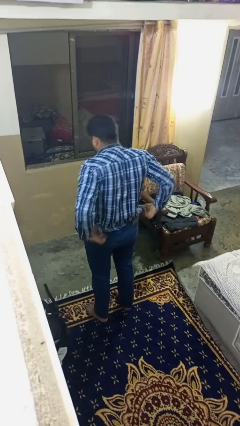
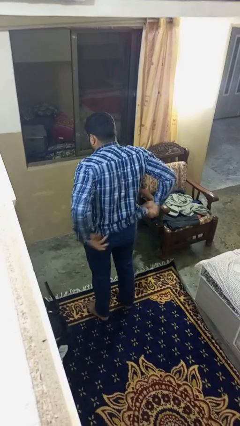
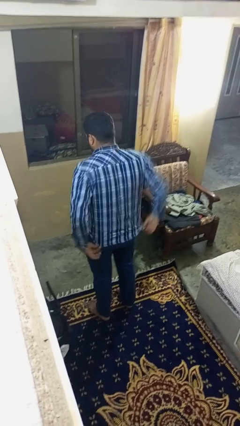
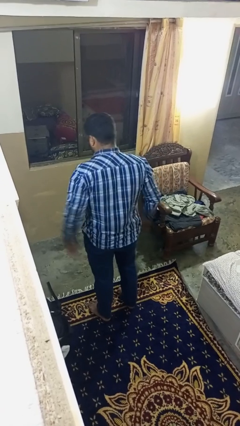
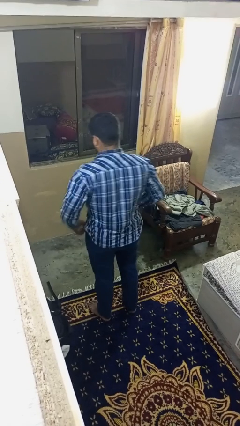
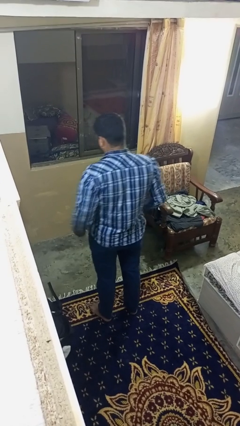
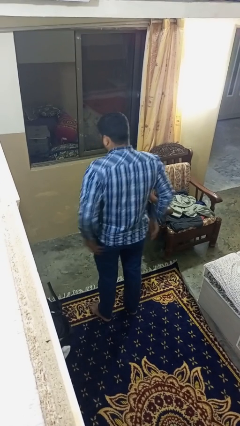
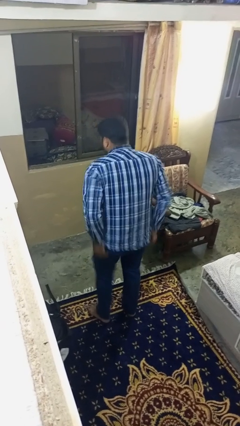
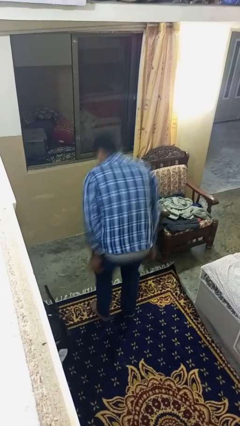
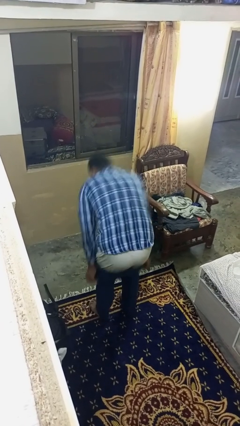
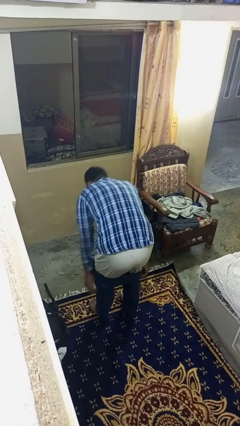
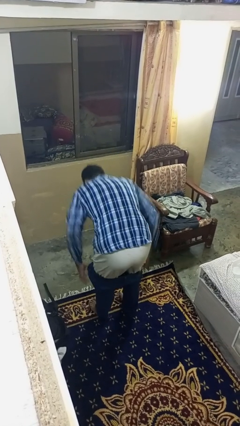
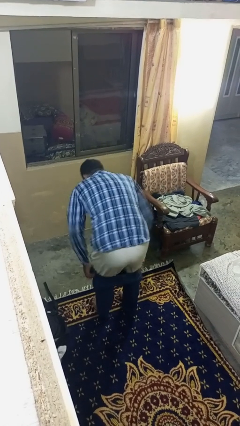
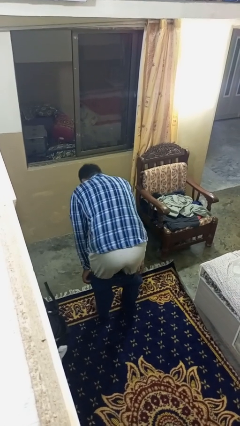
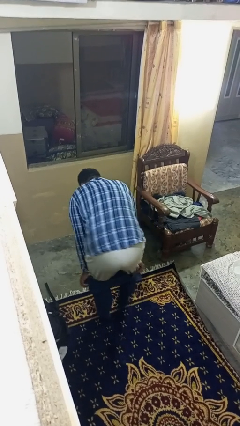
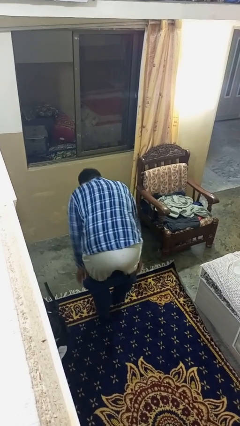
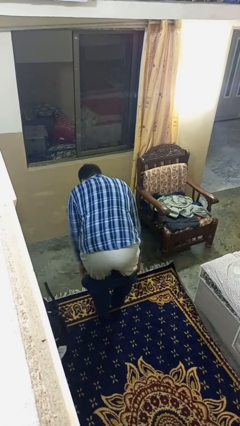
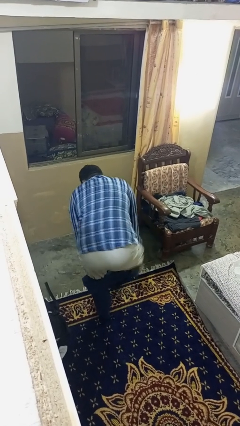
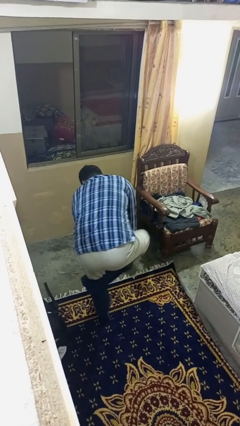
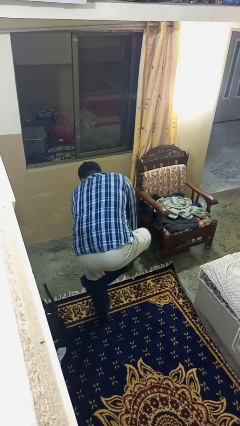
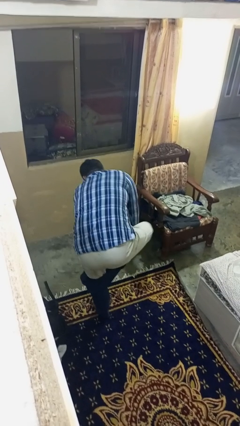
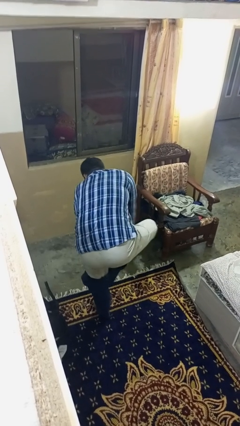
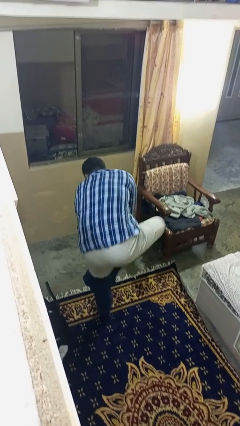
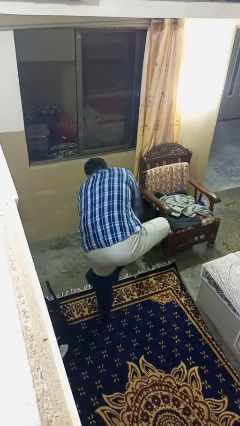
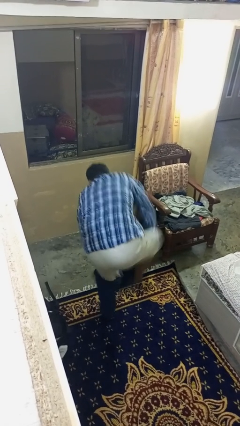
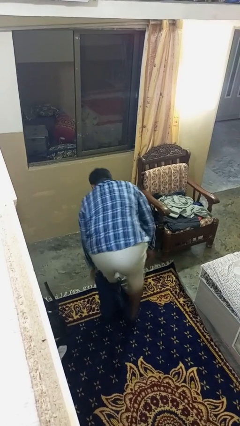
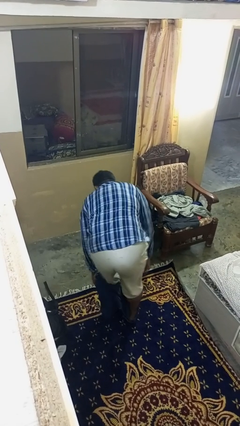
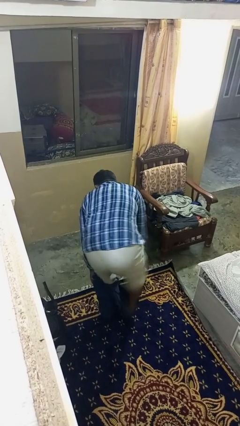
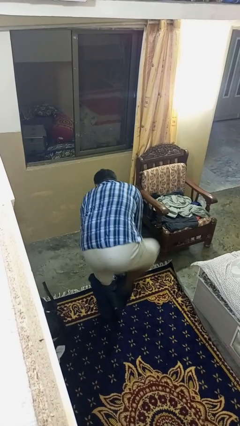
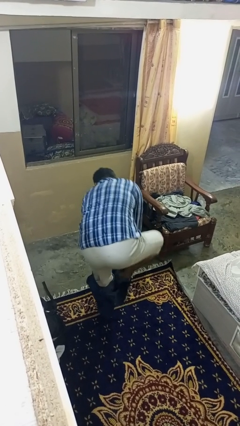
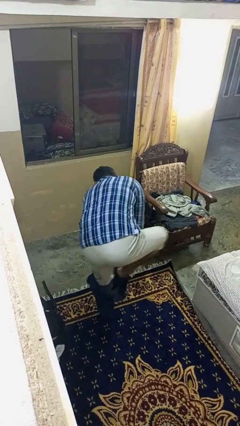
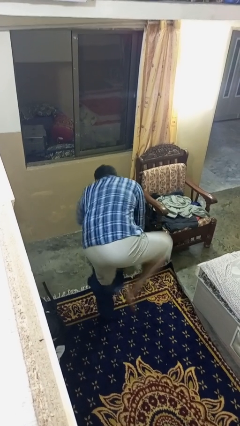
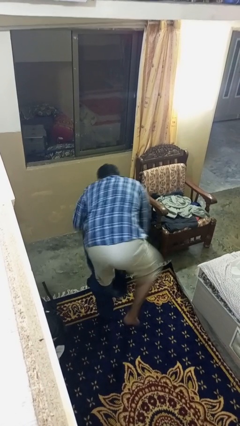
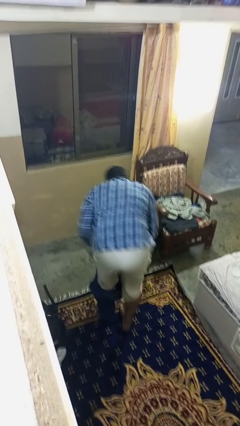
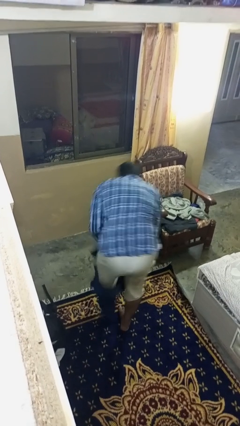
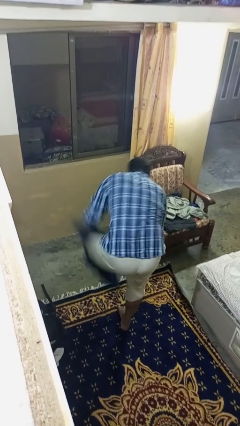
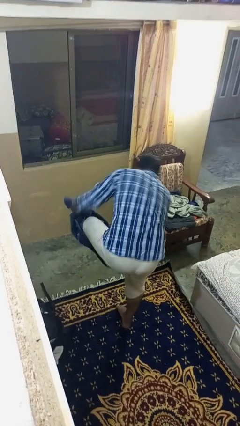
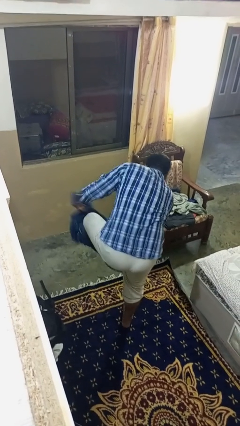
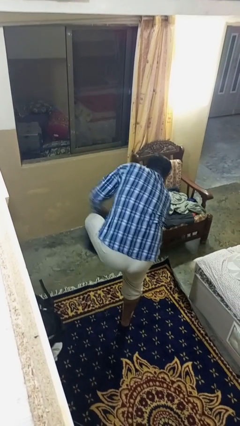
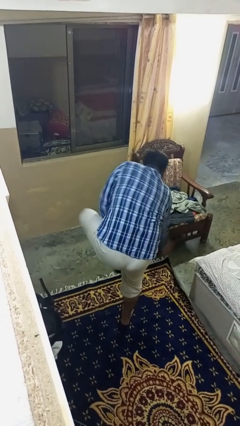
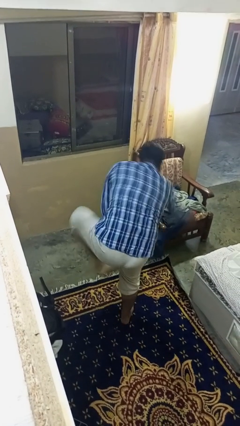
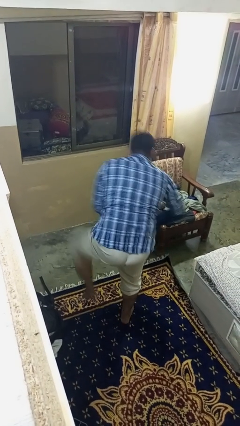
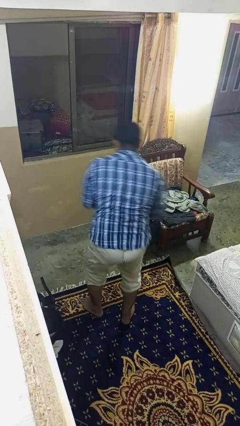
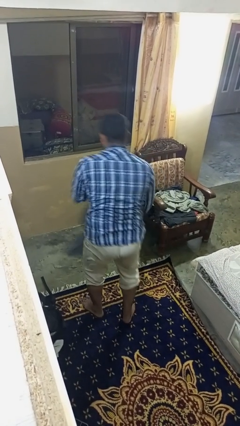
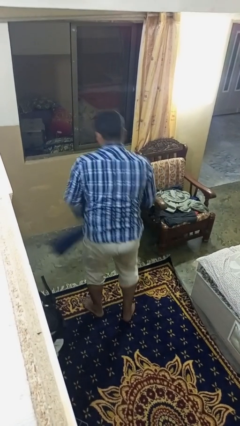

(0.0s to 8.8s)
person takes off pants

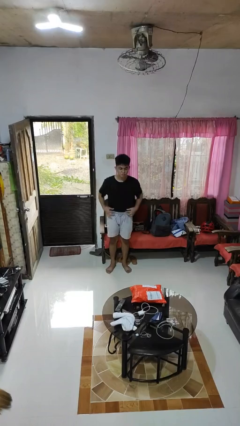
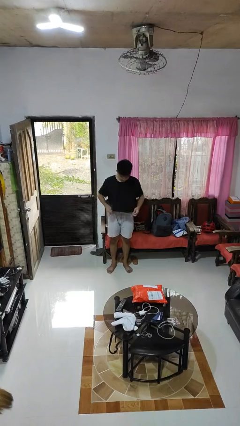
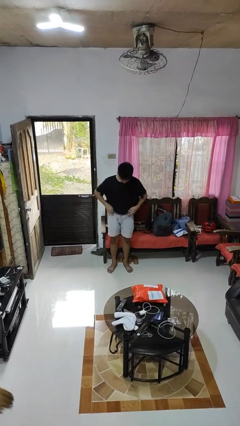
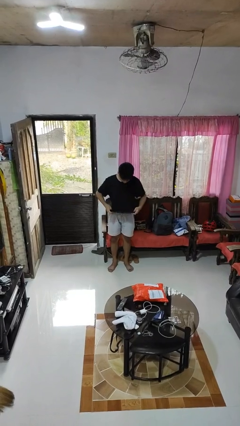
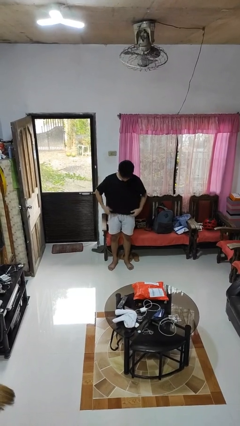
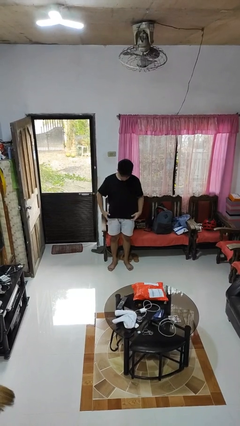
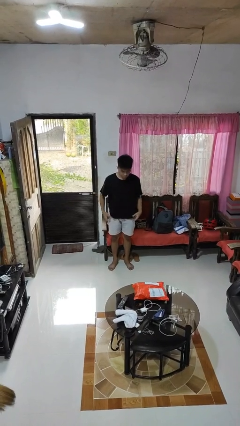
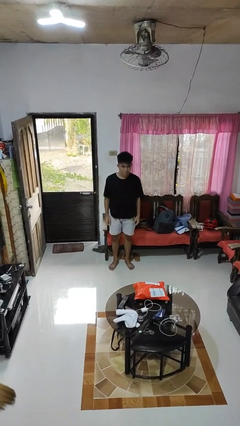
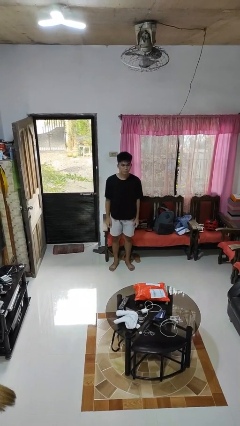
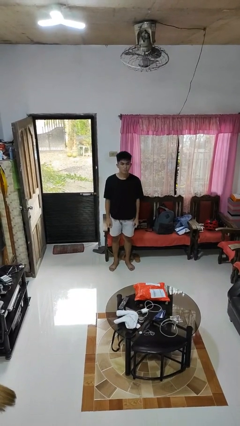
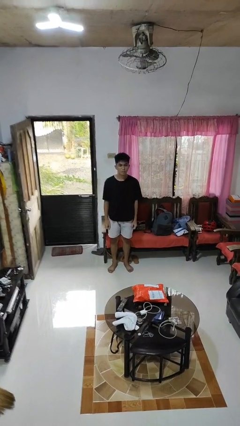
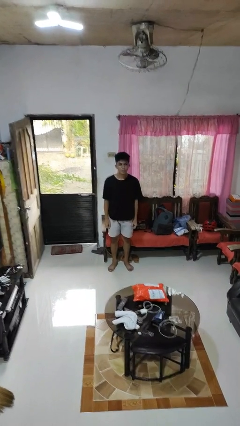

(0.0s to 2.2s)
person untucks shirt

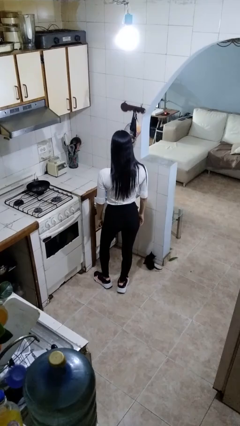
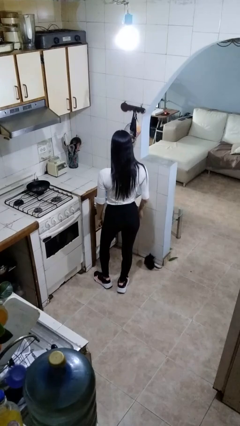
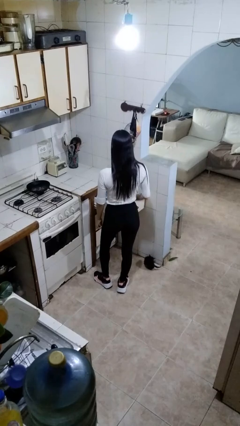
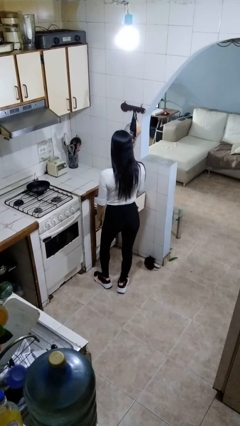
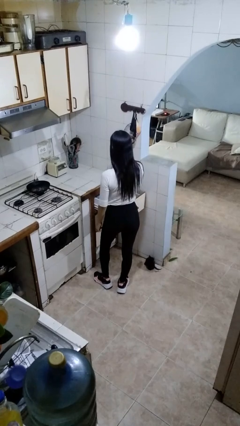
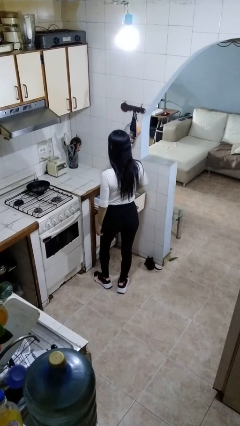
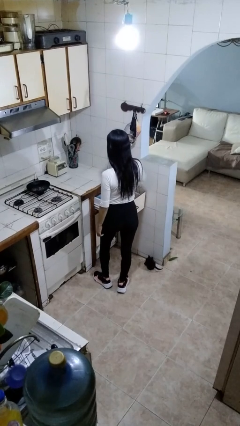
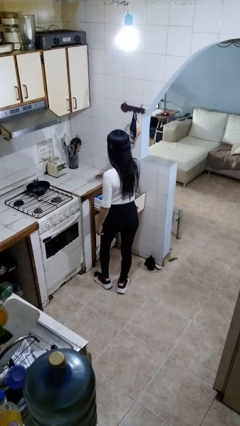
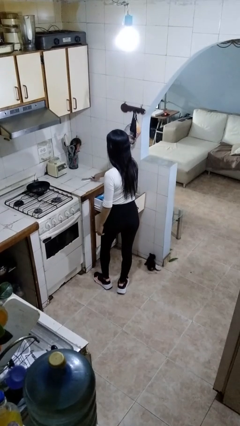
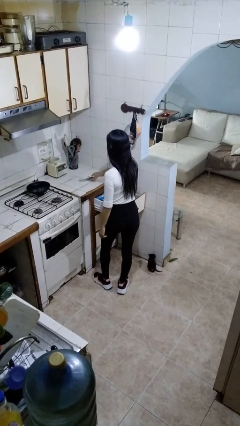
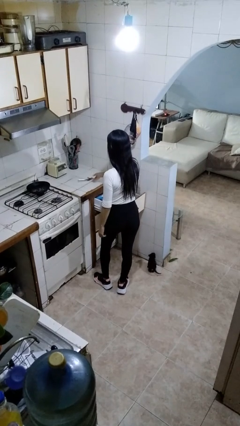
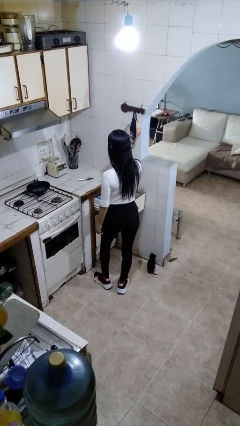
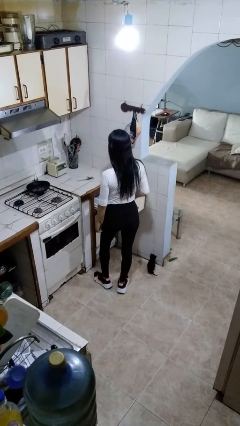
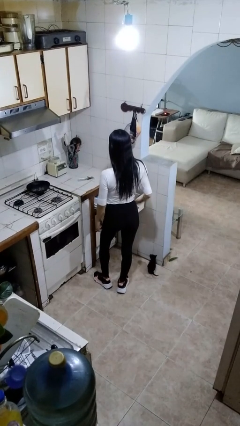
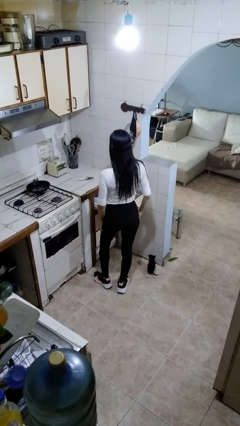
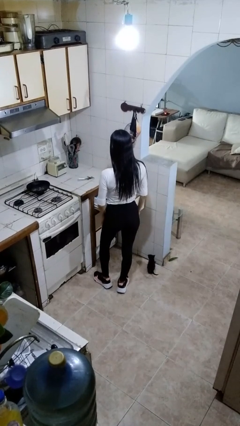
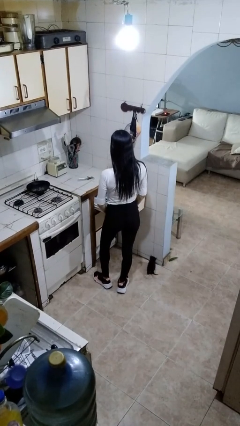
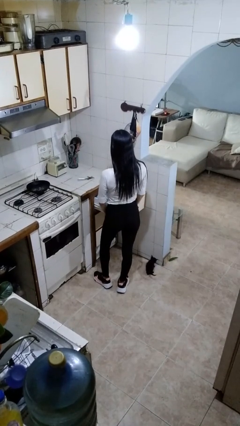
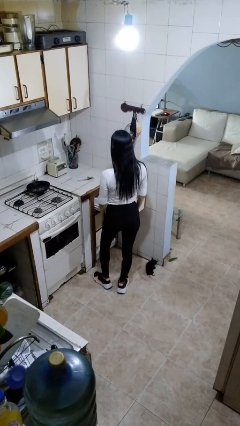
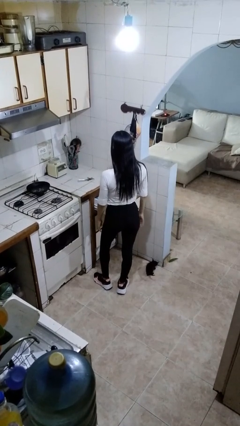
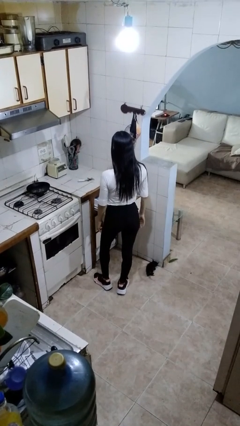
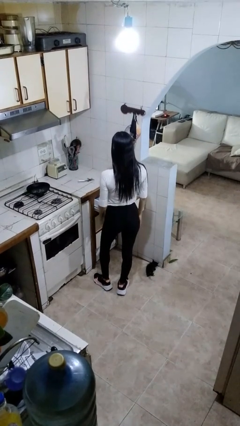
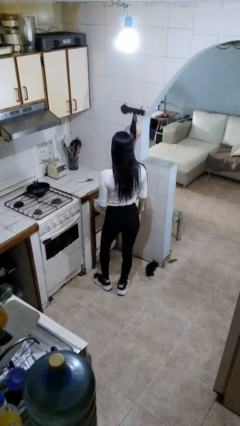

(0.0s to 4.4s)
person takes object from kitchen drawer

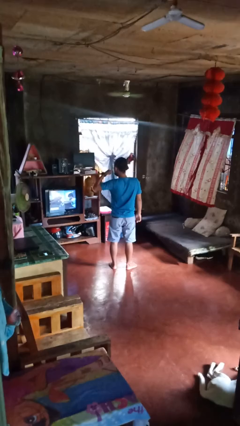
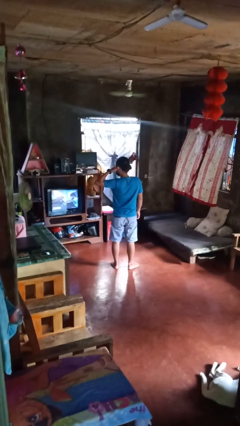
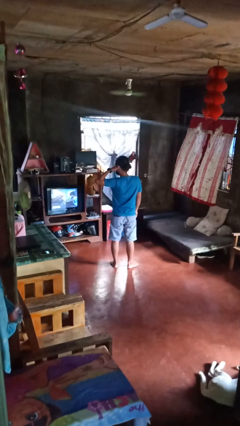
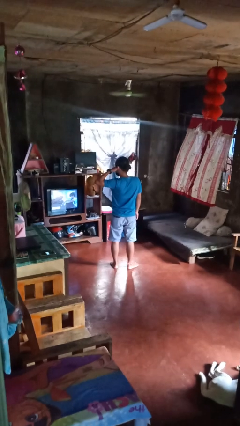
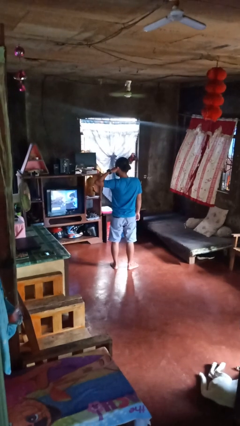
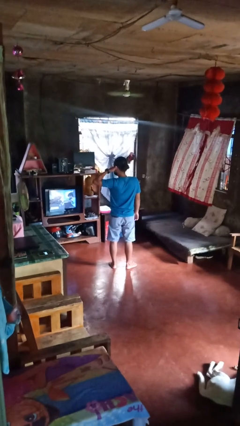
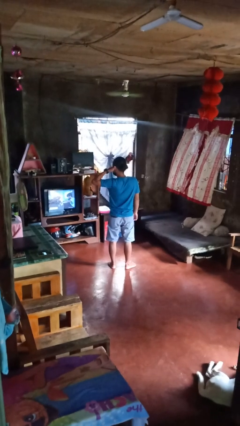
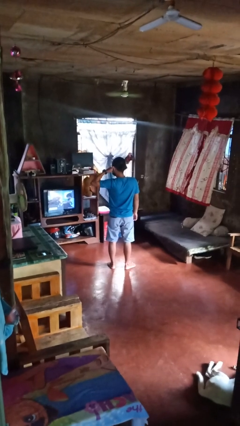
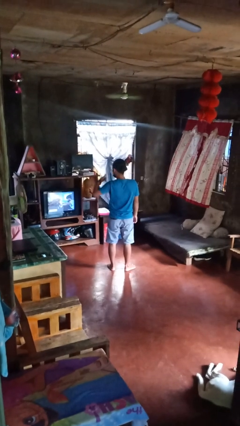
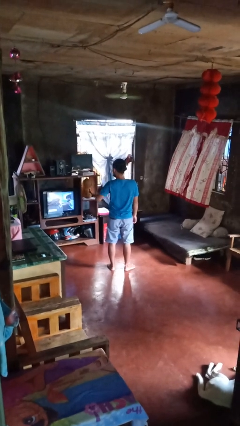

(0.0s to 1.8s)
person gestures call me

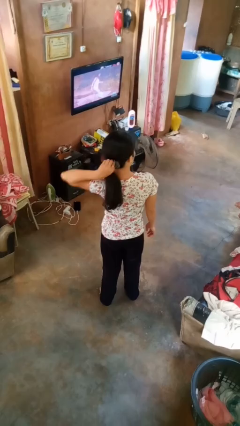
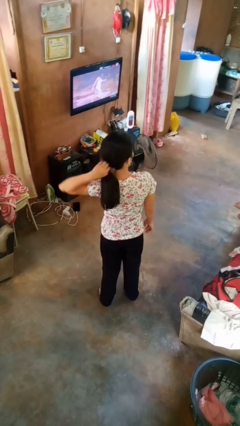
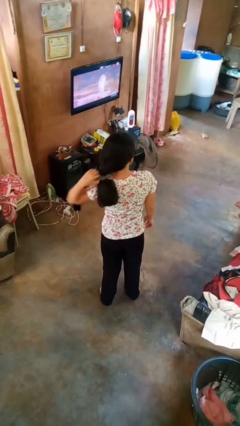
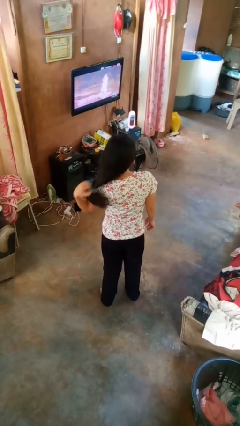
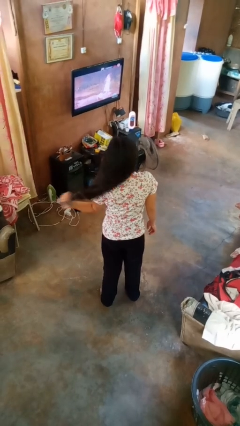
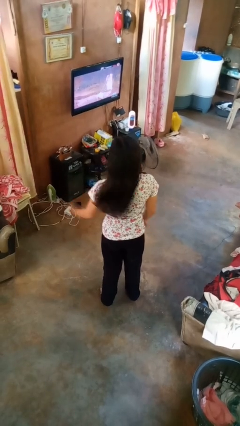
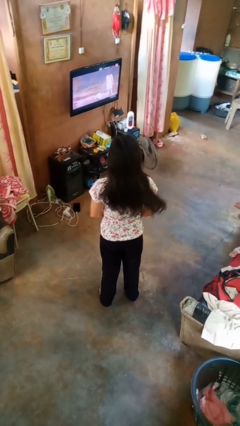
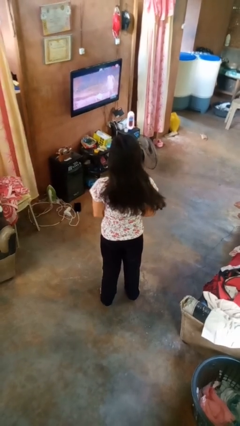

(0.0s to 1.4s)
person takes off hairtie
